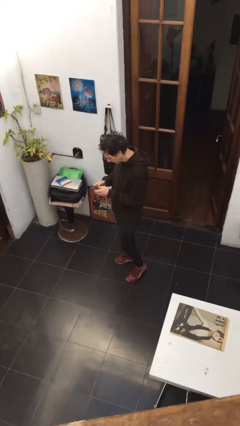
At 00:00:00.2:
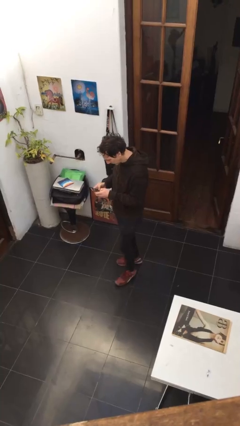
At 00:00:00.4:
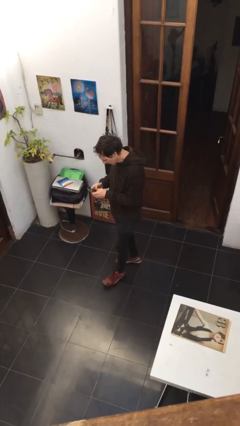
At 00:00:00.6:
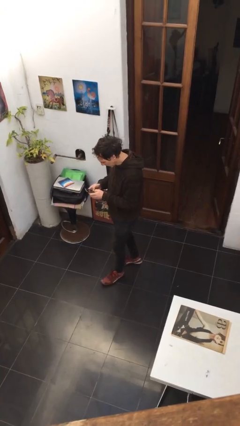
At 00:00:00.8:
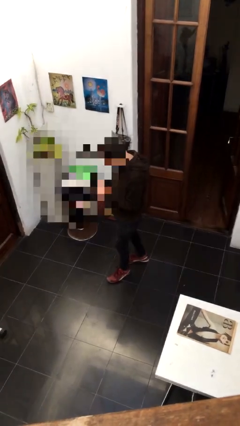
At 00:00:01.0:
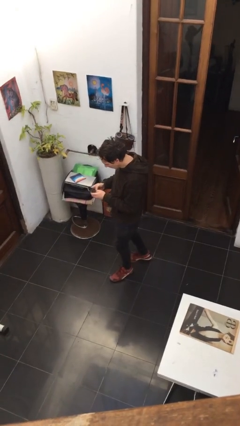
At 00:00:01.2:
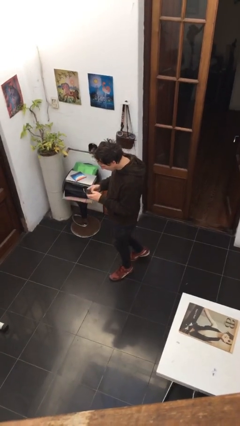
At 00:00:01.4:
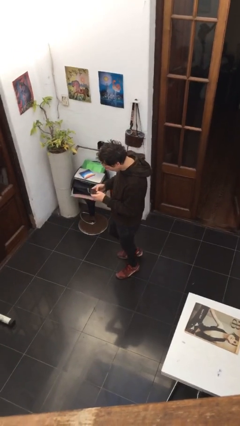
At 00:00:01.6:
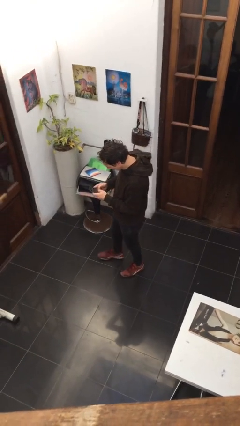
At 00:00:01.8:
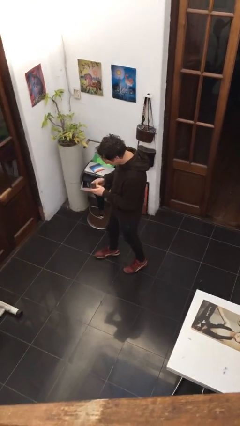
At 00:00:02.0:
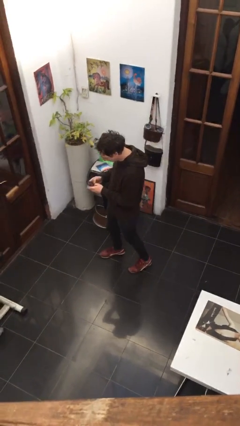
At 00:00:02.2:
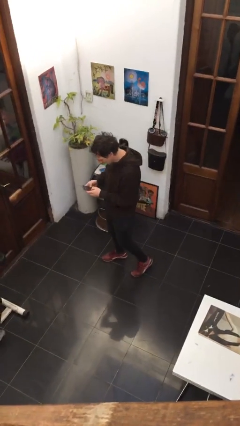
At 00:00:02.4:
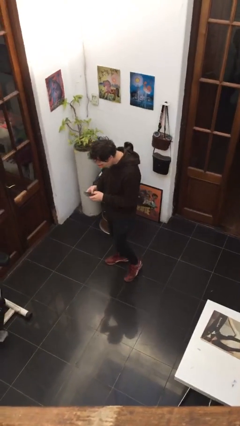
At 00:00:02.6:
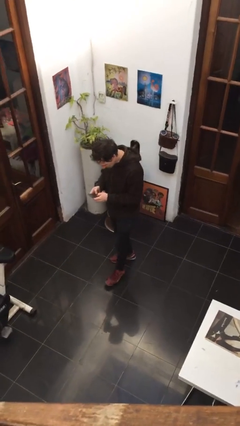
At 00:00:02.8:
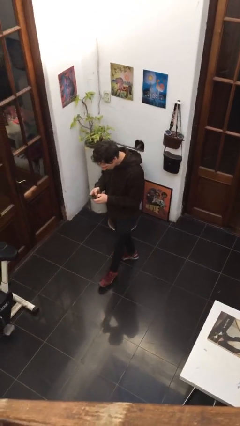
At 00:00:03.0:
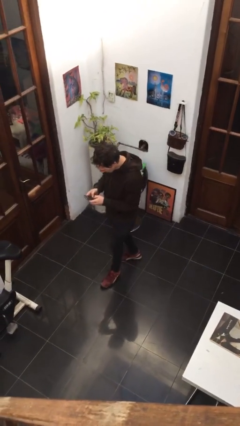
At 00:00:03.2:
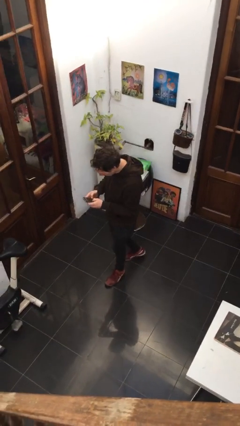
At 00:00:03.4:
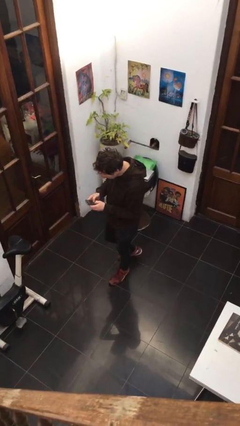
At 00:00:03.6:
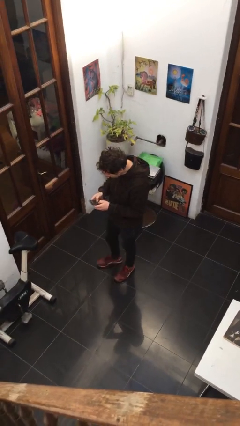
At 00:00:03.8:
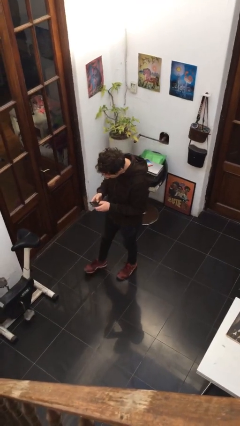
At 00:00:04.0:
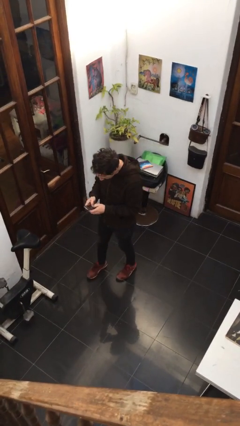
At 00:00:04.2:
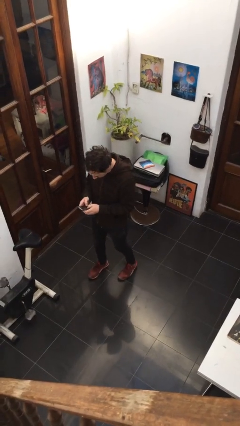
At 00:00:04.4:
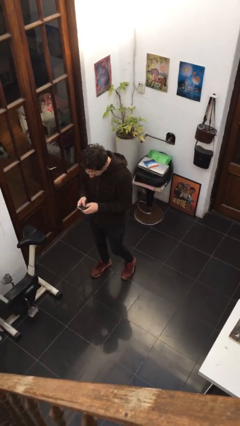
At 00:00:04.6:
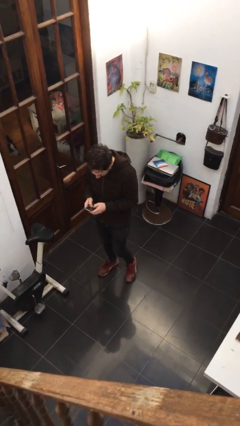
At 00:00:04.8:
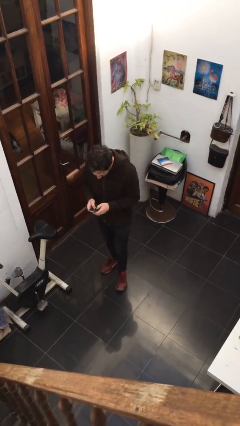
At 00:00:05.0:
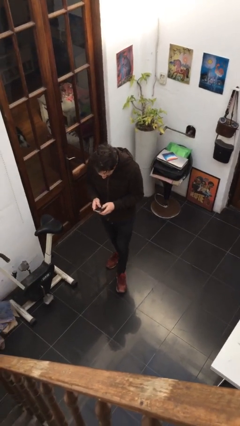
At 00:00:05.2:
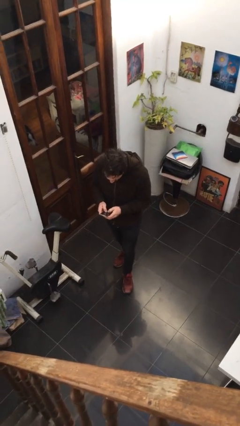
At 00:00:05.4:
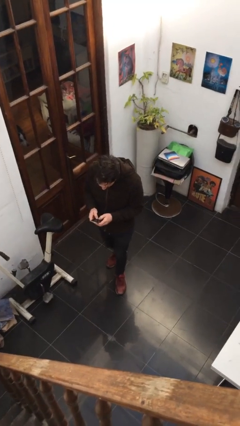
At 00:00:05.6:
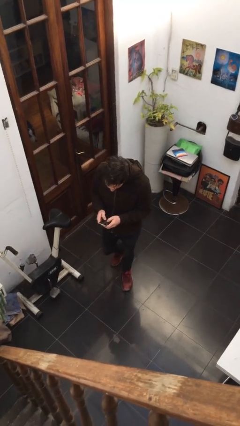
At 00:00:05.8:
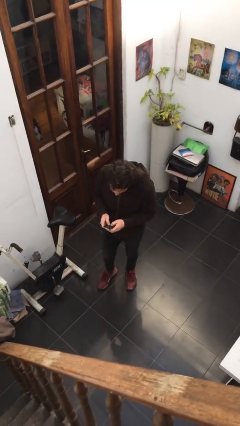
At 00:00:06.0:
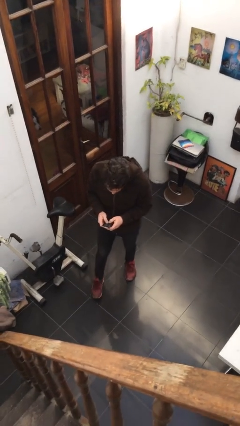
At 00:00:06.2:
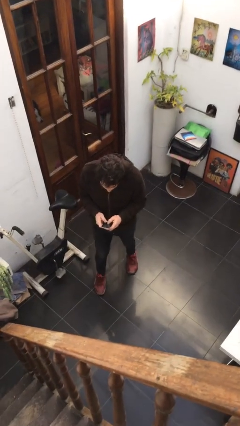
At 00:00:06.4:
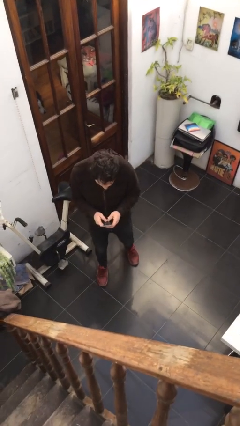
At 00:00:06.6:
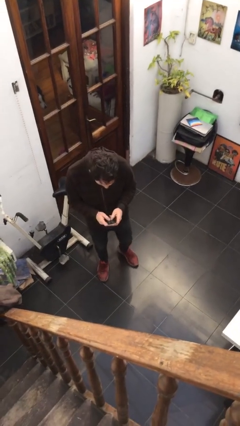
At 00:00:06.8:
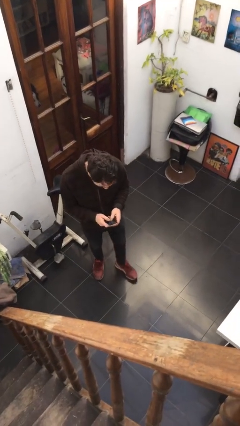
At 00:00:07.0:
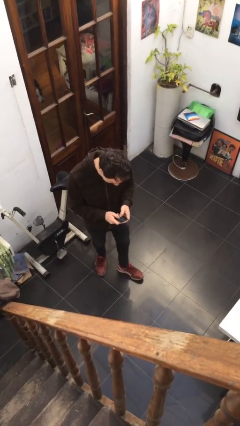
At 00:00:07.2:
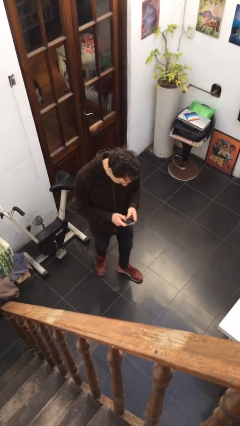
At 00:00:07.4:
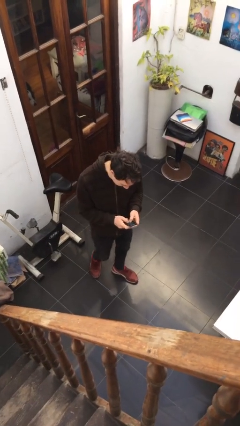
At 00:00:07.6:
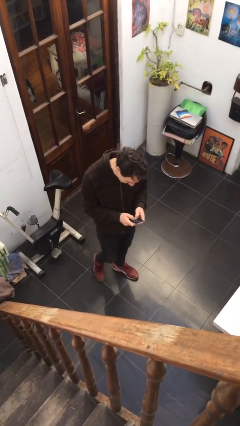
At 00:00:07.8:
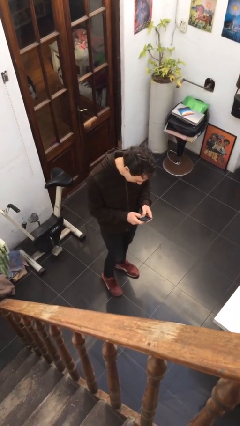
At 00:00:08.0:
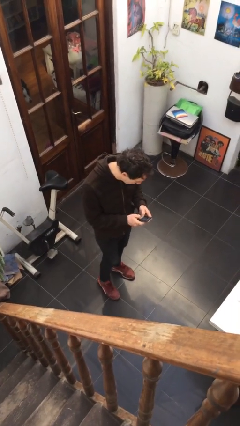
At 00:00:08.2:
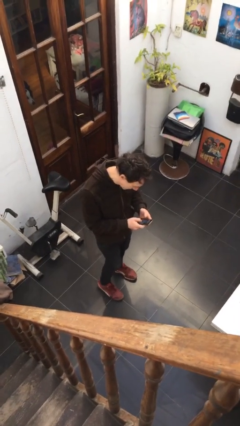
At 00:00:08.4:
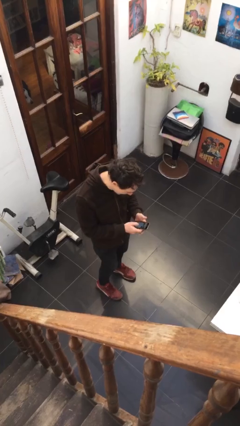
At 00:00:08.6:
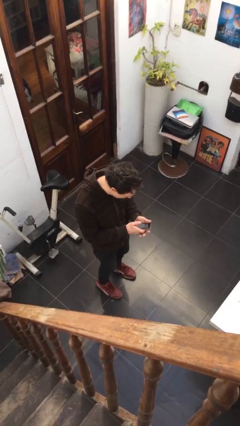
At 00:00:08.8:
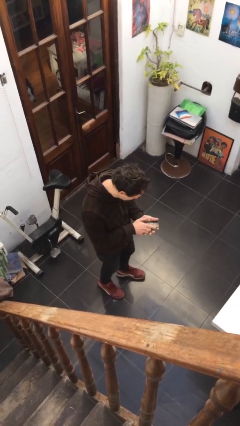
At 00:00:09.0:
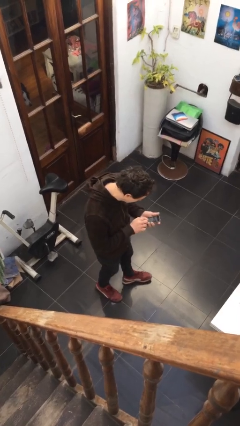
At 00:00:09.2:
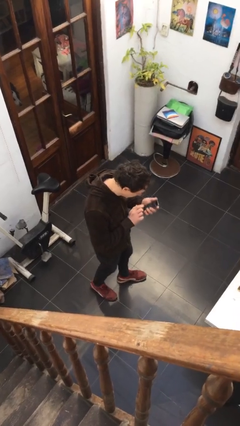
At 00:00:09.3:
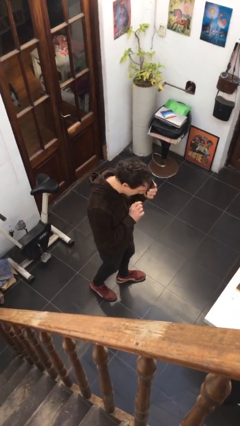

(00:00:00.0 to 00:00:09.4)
person texts on phone

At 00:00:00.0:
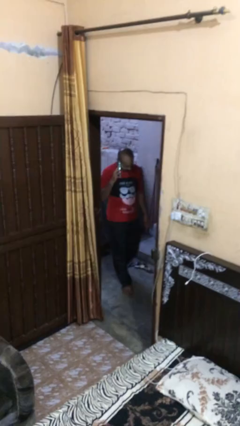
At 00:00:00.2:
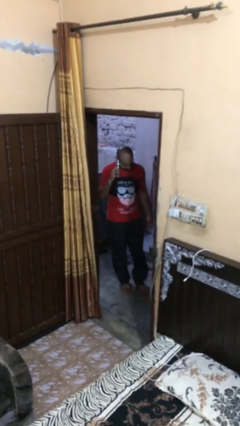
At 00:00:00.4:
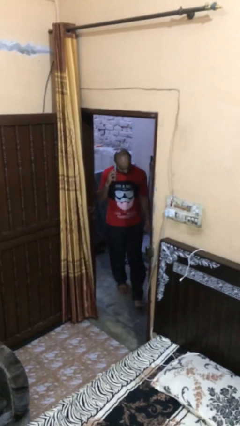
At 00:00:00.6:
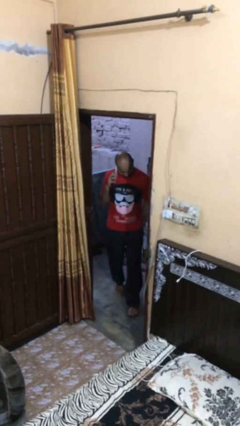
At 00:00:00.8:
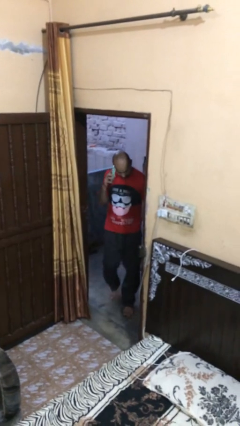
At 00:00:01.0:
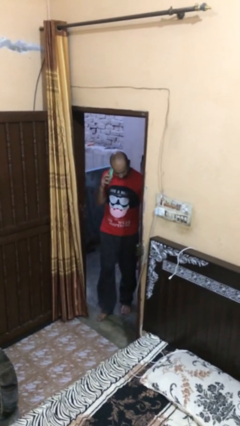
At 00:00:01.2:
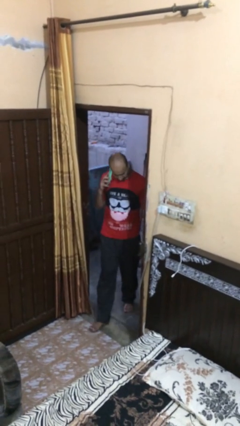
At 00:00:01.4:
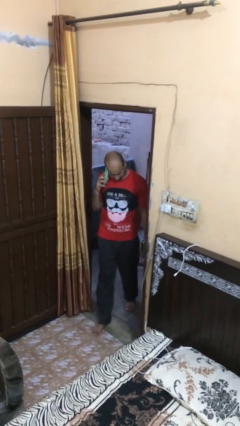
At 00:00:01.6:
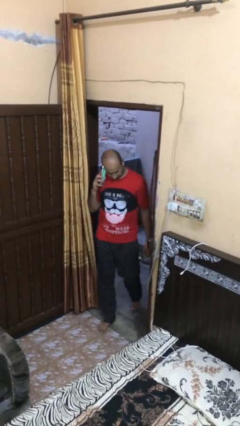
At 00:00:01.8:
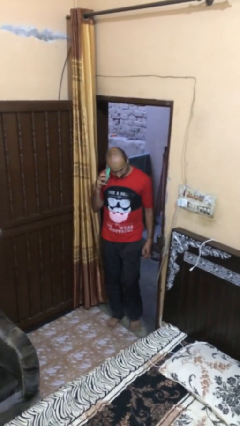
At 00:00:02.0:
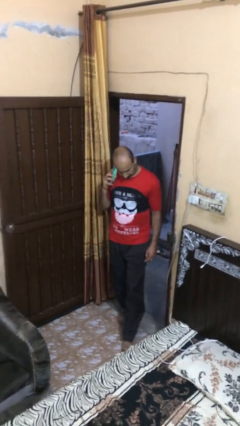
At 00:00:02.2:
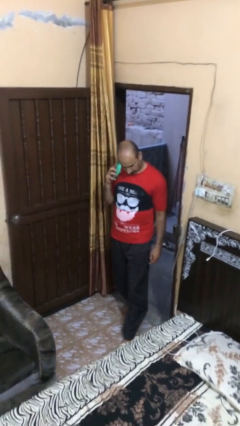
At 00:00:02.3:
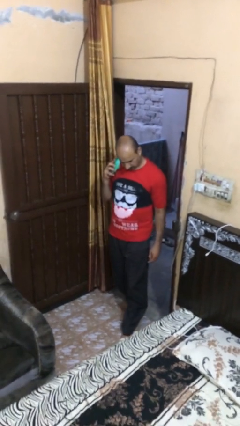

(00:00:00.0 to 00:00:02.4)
person enters scene through structure

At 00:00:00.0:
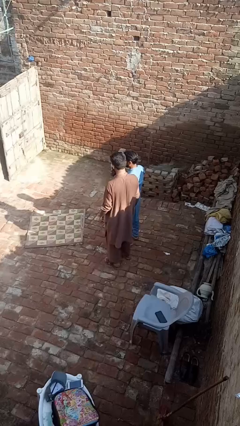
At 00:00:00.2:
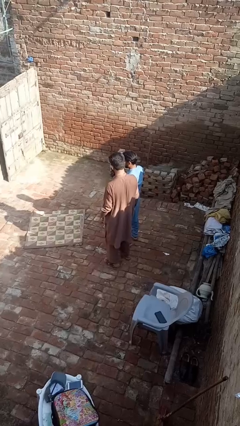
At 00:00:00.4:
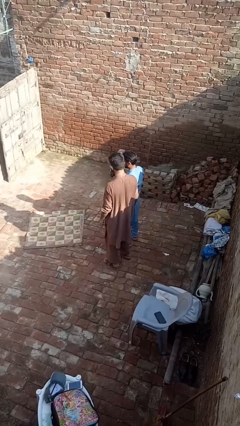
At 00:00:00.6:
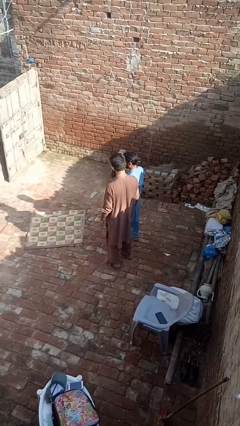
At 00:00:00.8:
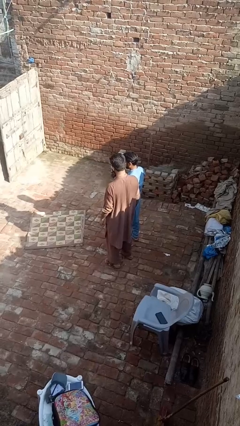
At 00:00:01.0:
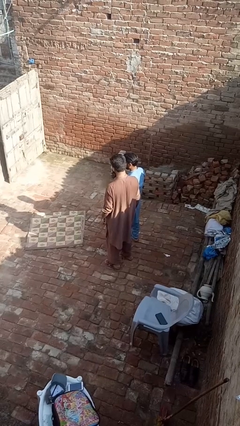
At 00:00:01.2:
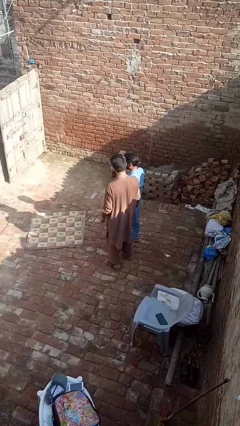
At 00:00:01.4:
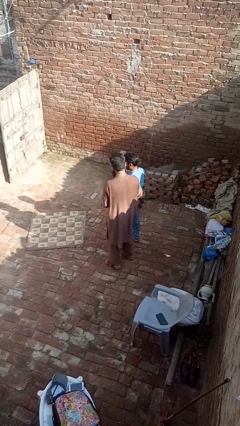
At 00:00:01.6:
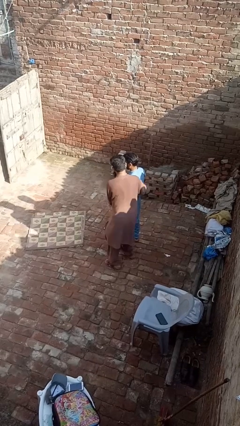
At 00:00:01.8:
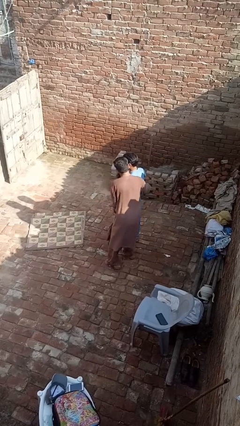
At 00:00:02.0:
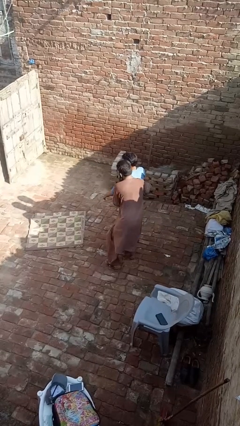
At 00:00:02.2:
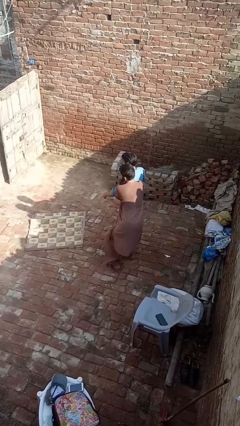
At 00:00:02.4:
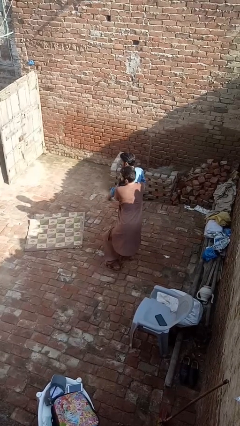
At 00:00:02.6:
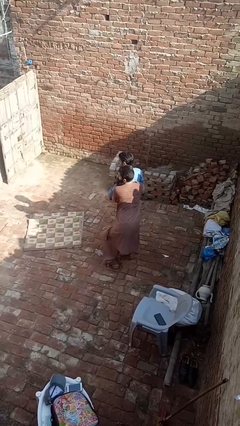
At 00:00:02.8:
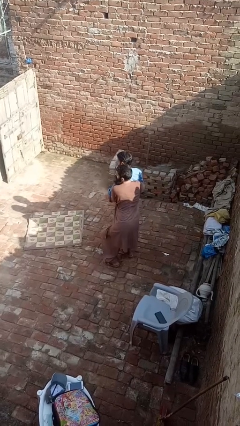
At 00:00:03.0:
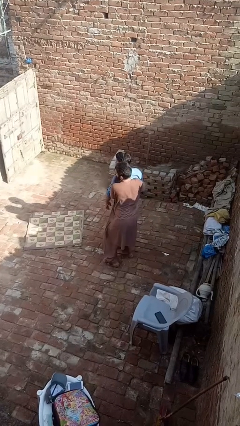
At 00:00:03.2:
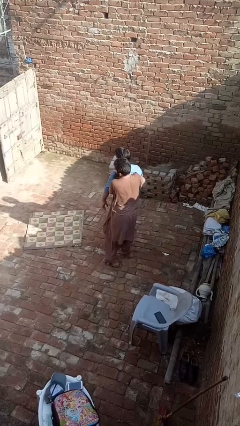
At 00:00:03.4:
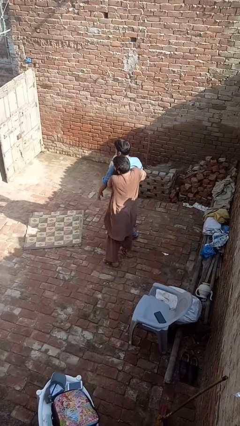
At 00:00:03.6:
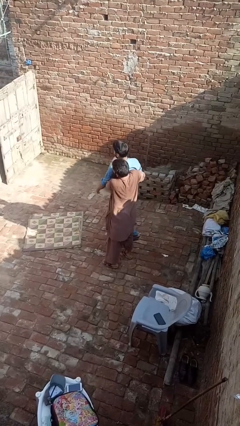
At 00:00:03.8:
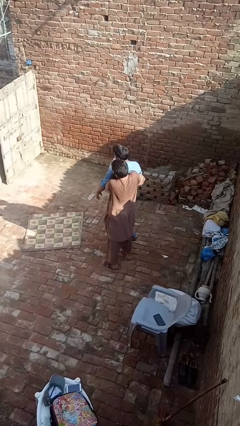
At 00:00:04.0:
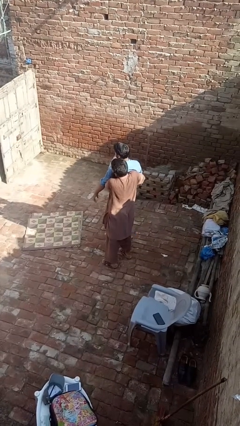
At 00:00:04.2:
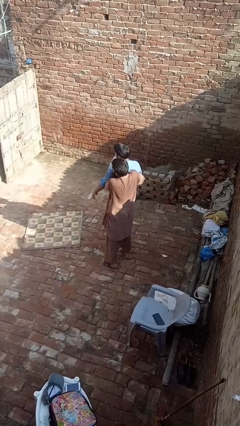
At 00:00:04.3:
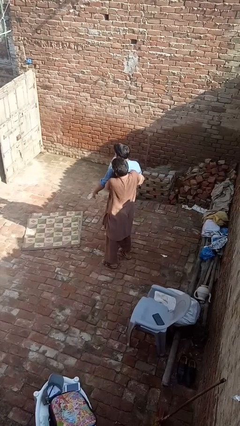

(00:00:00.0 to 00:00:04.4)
person picks up person

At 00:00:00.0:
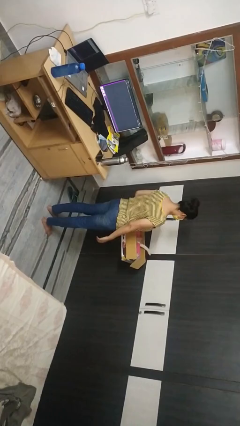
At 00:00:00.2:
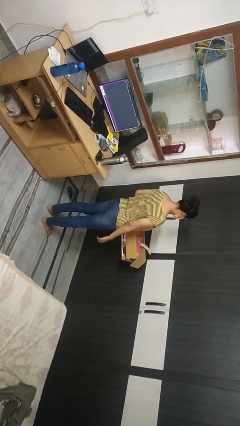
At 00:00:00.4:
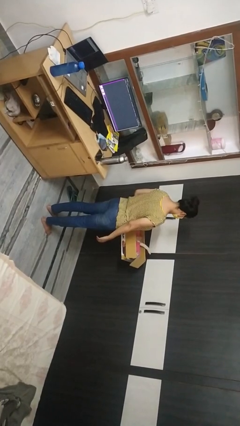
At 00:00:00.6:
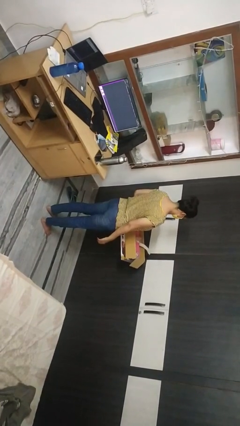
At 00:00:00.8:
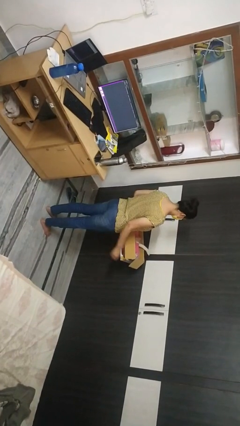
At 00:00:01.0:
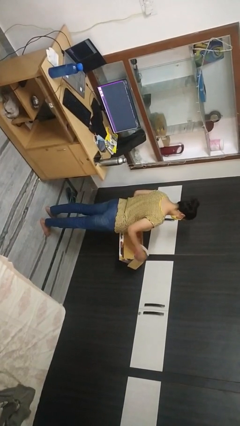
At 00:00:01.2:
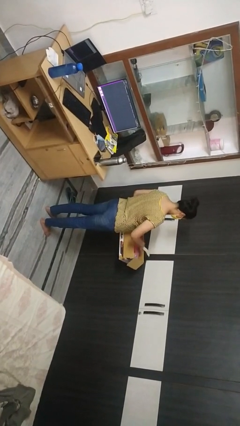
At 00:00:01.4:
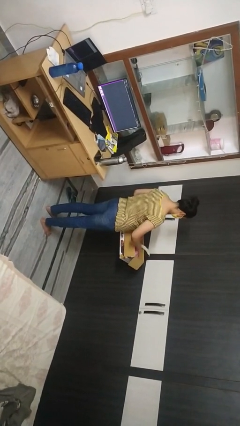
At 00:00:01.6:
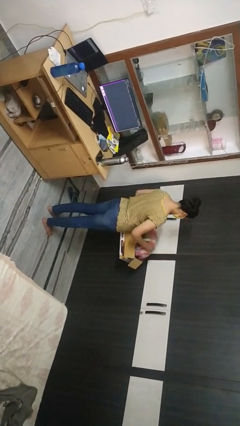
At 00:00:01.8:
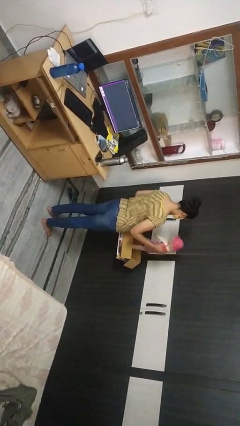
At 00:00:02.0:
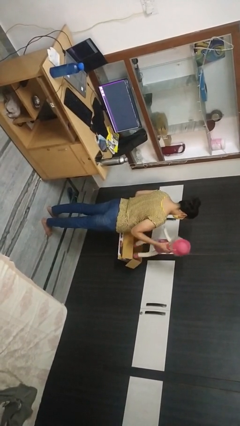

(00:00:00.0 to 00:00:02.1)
person takes object from box
